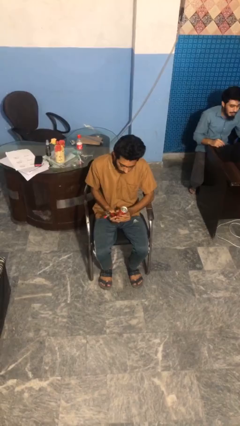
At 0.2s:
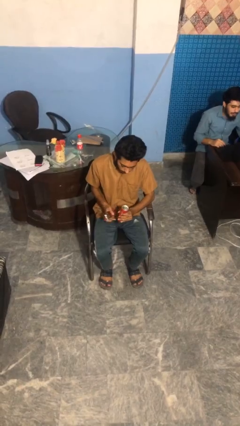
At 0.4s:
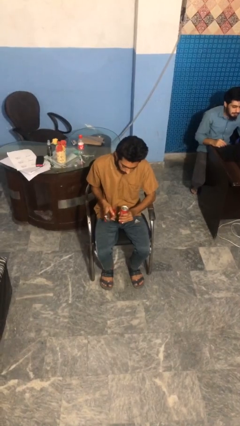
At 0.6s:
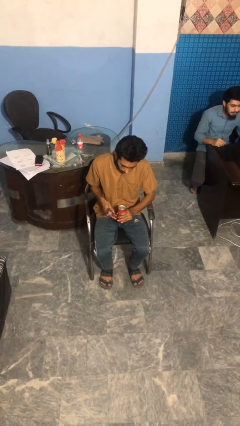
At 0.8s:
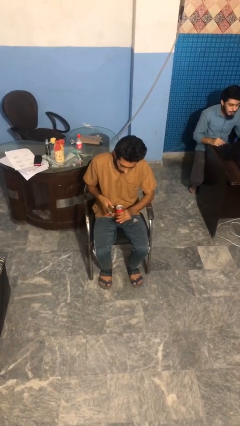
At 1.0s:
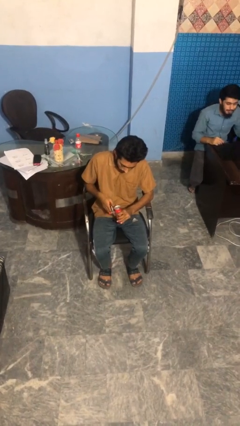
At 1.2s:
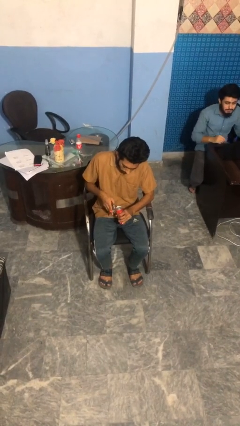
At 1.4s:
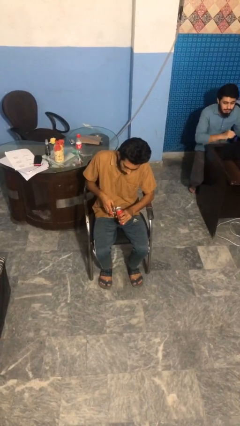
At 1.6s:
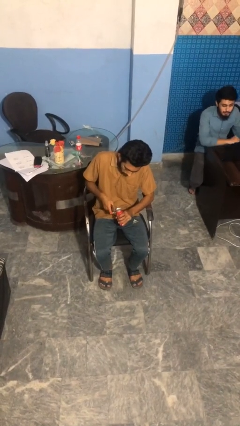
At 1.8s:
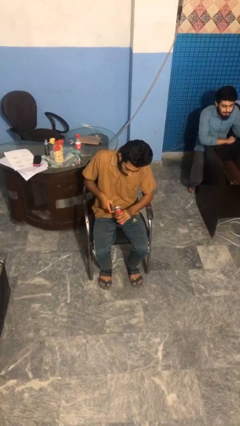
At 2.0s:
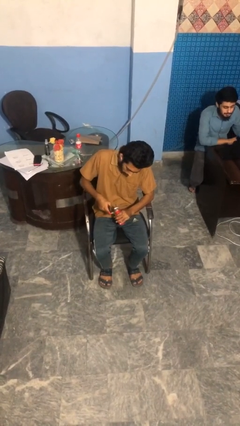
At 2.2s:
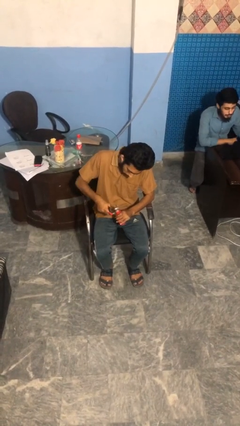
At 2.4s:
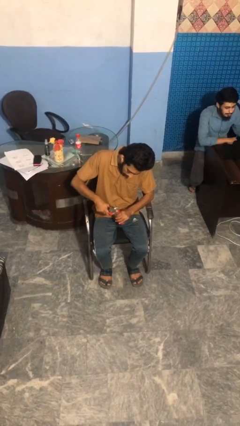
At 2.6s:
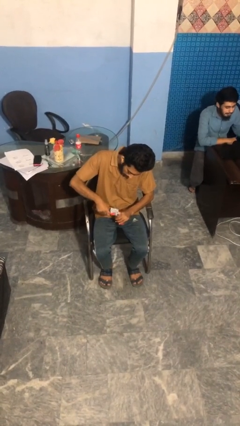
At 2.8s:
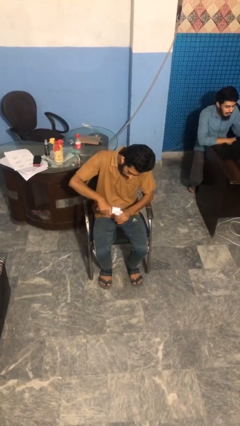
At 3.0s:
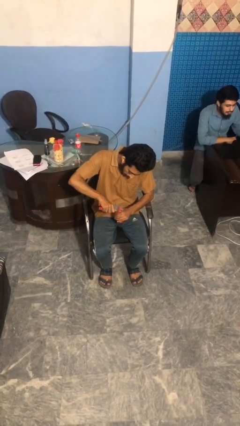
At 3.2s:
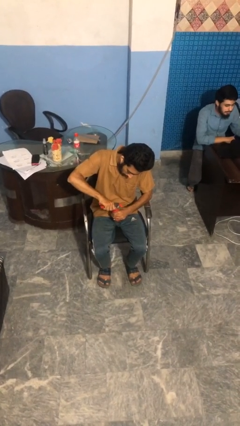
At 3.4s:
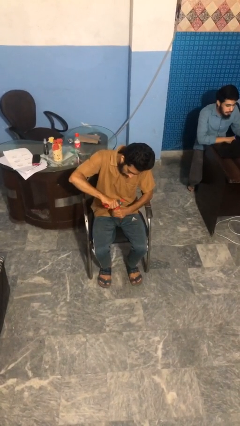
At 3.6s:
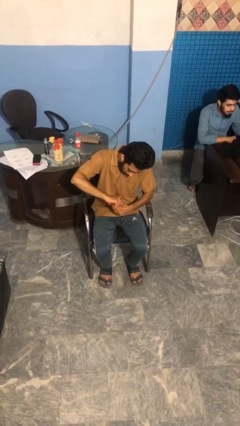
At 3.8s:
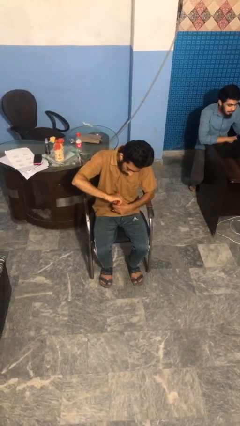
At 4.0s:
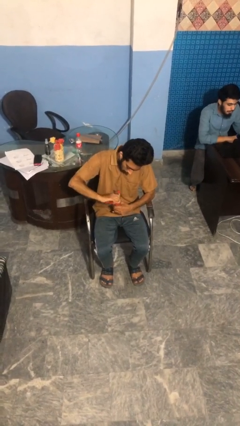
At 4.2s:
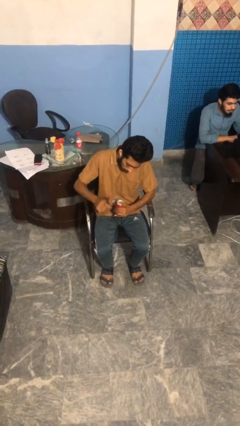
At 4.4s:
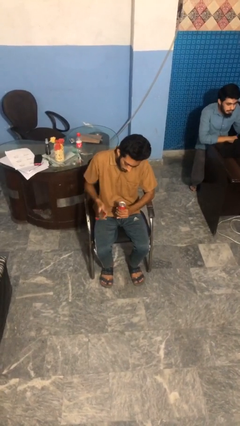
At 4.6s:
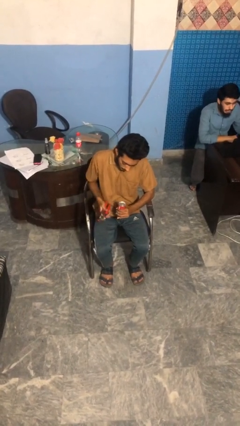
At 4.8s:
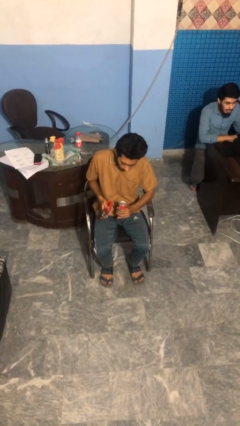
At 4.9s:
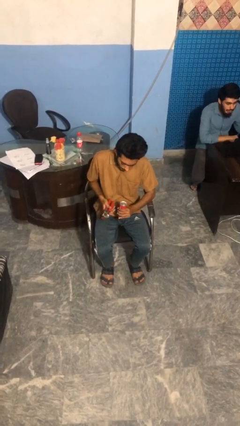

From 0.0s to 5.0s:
person opens can with can opener

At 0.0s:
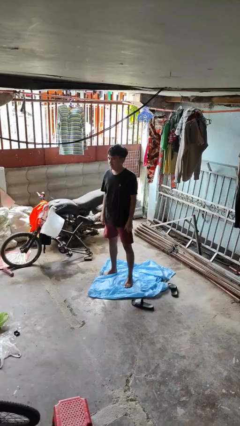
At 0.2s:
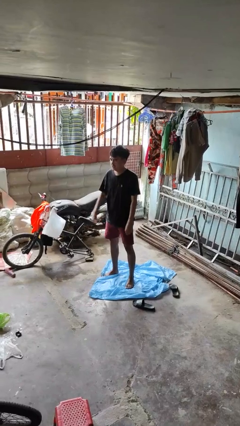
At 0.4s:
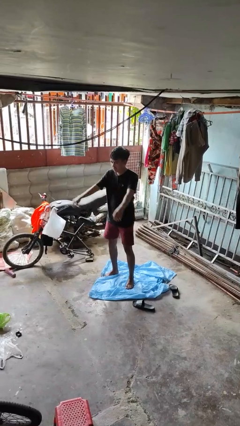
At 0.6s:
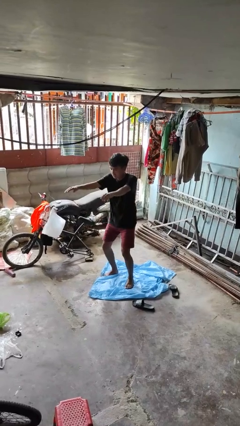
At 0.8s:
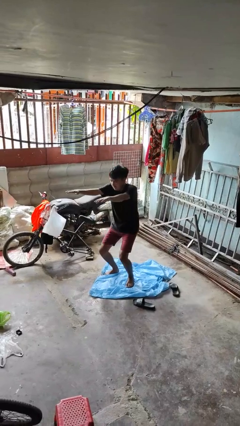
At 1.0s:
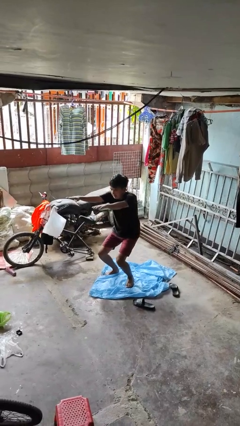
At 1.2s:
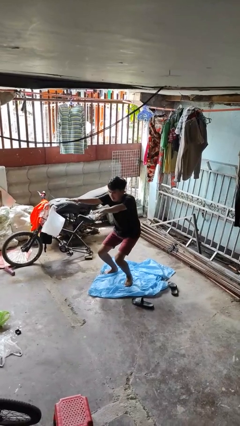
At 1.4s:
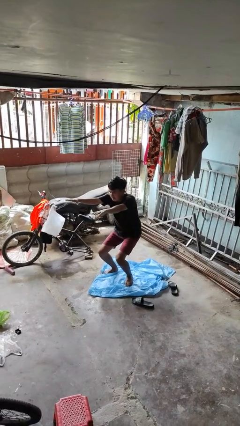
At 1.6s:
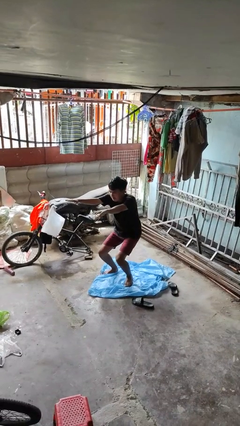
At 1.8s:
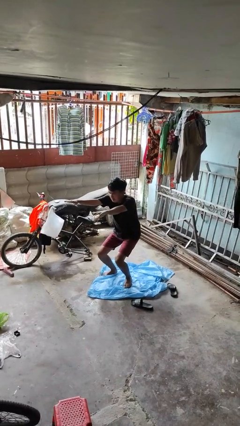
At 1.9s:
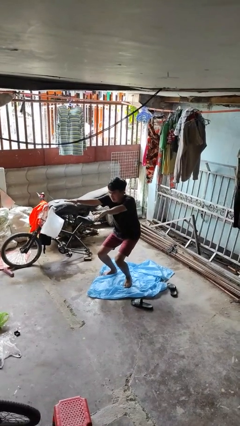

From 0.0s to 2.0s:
person squats

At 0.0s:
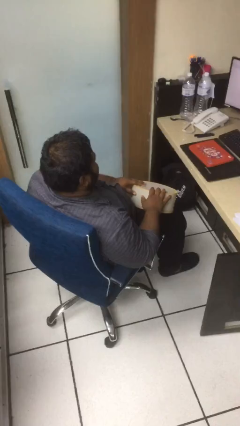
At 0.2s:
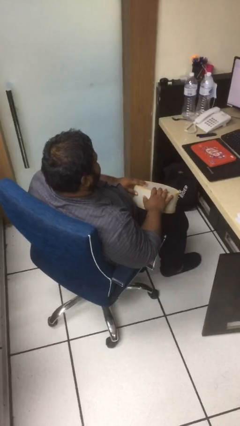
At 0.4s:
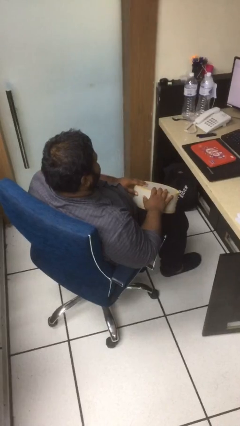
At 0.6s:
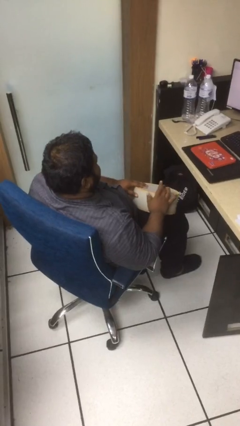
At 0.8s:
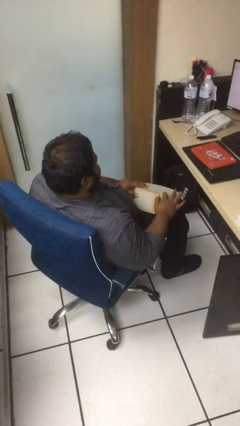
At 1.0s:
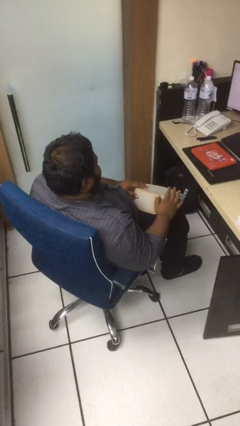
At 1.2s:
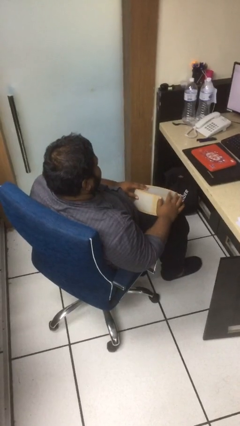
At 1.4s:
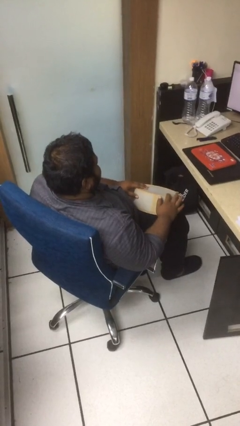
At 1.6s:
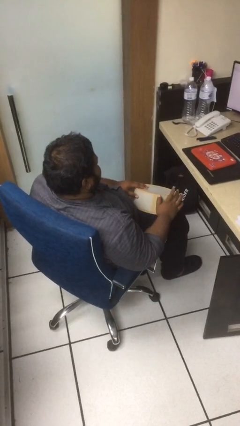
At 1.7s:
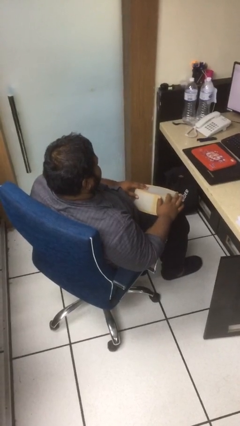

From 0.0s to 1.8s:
person taps object with finger

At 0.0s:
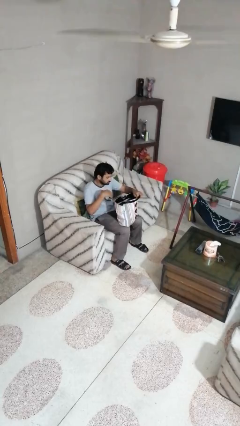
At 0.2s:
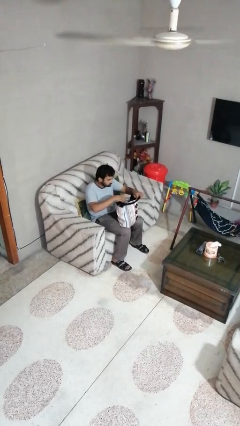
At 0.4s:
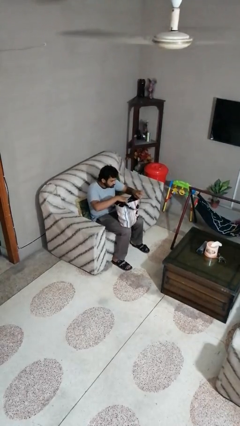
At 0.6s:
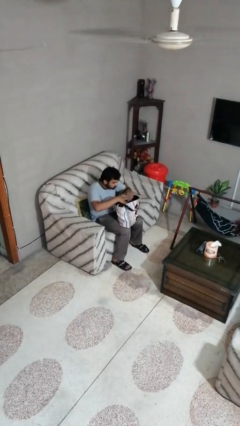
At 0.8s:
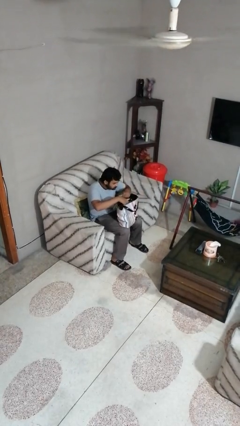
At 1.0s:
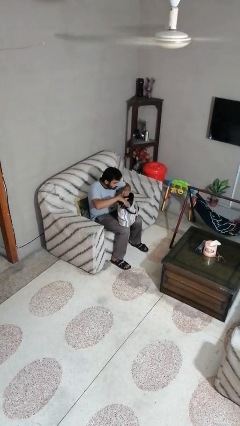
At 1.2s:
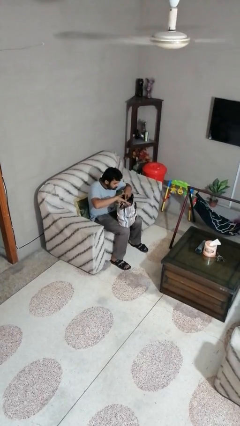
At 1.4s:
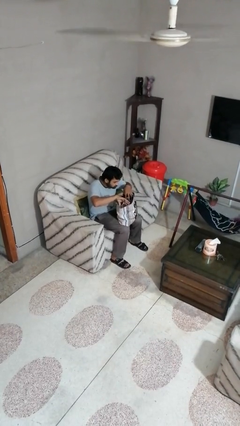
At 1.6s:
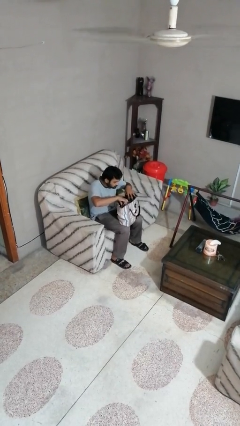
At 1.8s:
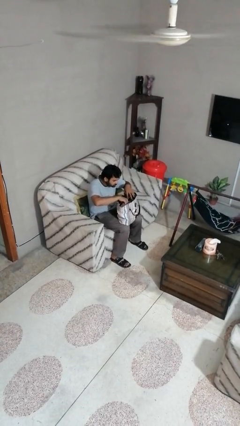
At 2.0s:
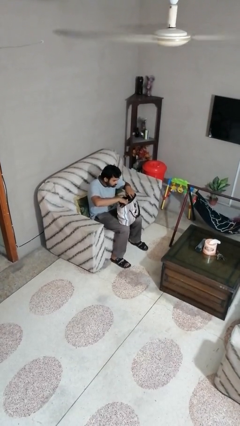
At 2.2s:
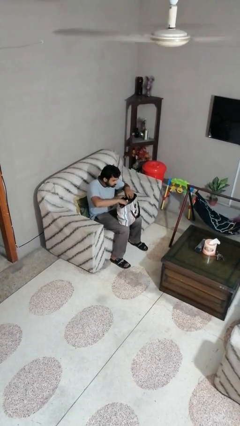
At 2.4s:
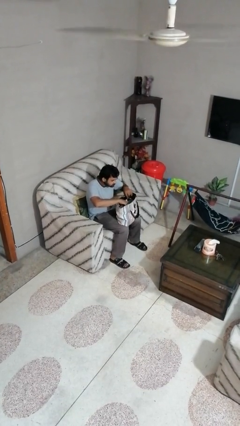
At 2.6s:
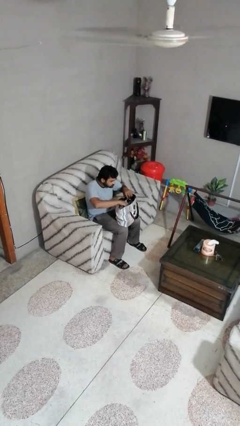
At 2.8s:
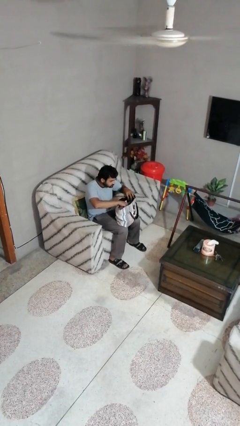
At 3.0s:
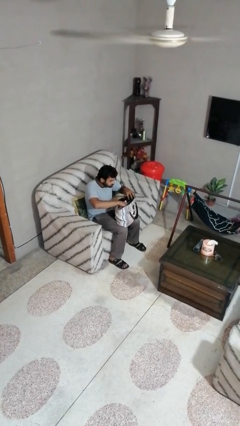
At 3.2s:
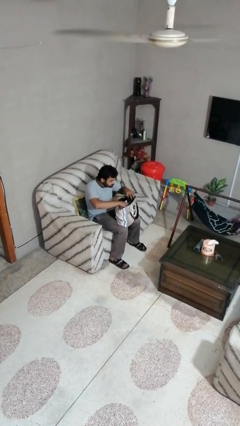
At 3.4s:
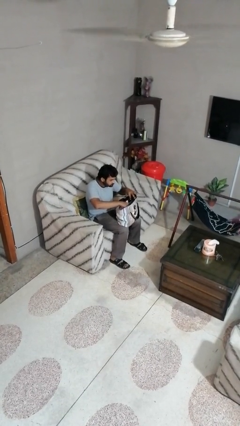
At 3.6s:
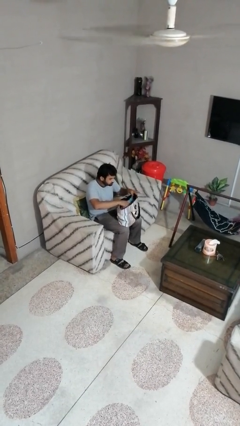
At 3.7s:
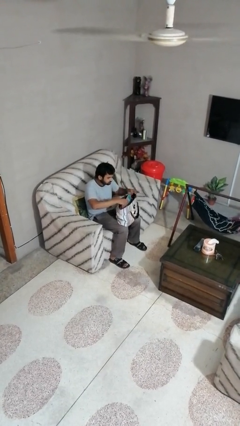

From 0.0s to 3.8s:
person searches in backpack

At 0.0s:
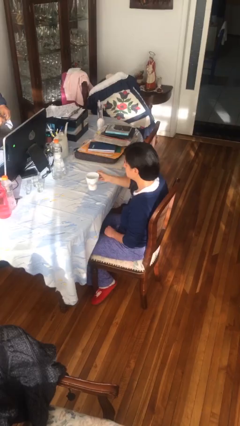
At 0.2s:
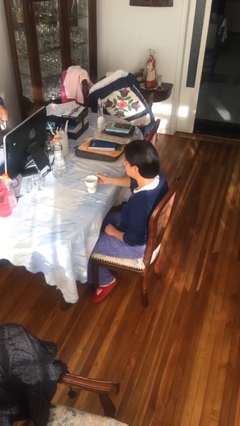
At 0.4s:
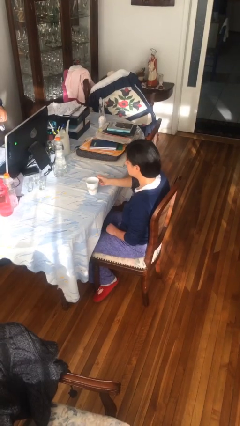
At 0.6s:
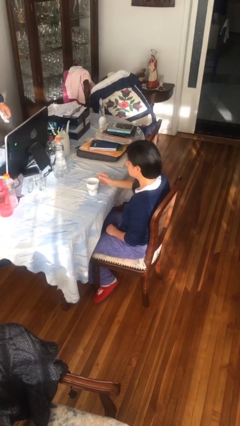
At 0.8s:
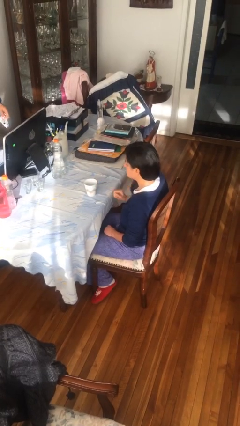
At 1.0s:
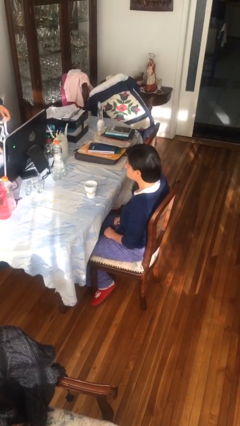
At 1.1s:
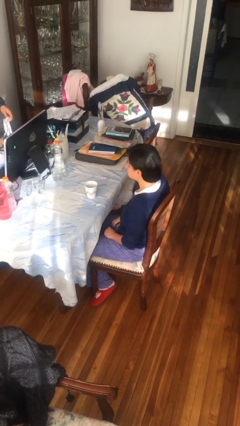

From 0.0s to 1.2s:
person puts down object on table

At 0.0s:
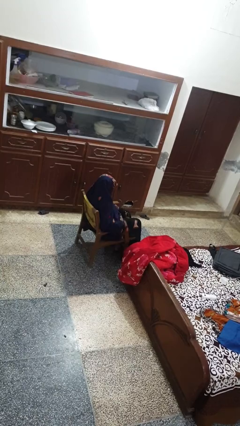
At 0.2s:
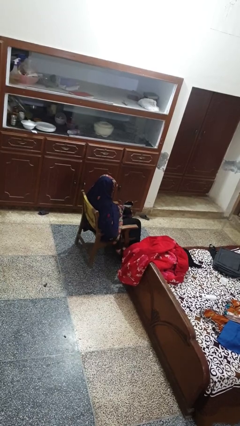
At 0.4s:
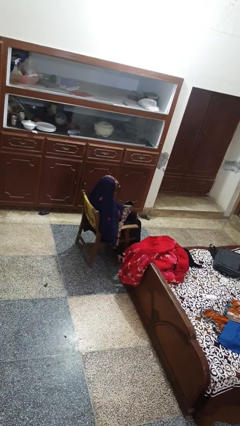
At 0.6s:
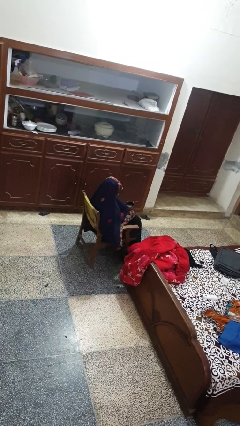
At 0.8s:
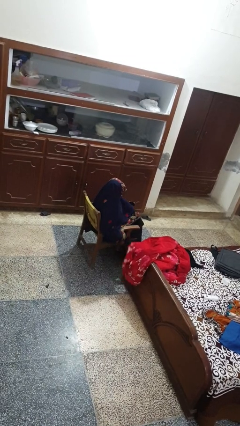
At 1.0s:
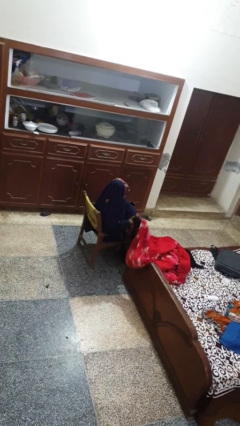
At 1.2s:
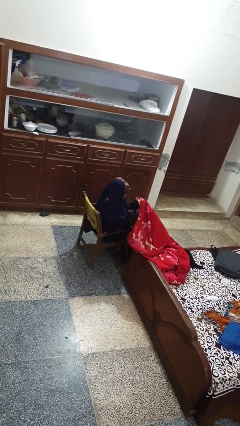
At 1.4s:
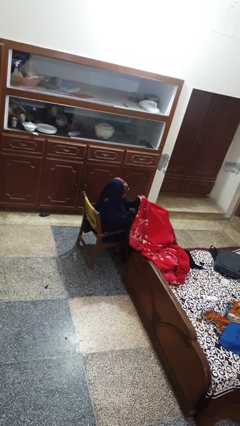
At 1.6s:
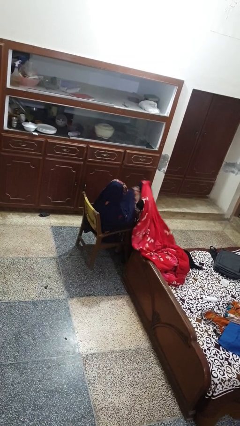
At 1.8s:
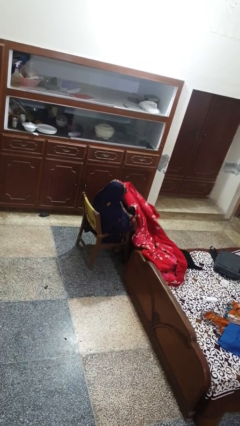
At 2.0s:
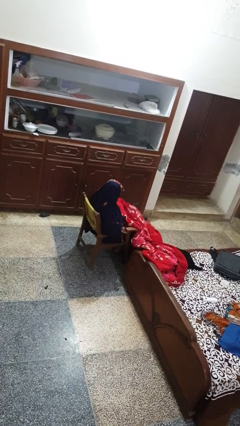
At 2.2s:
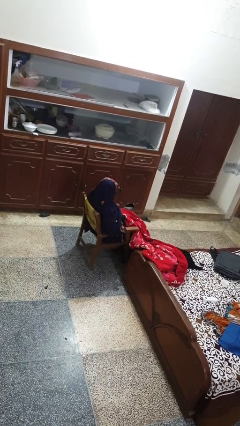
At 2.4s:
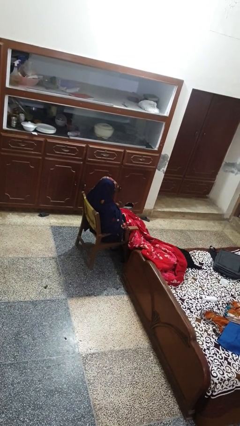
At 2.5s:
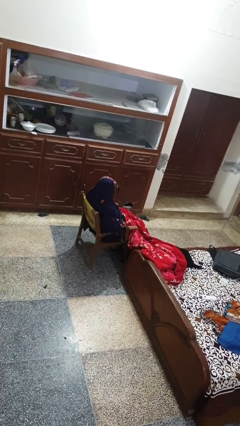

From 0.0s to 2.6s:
person covers with blanket

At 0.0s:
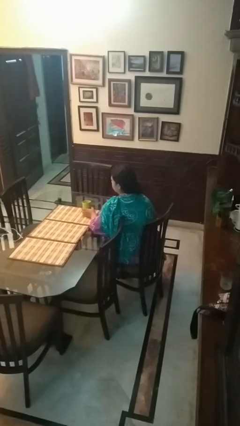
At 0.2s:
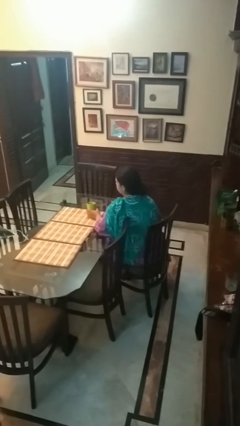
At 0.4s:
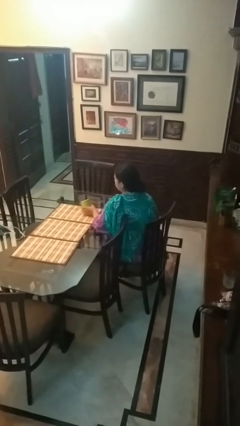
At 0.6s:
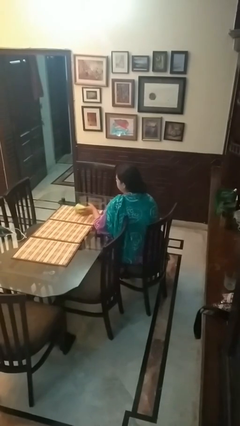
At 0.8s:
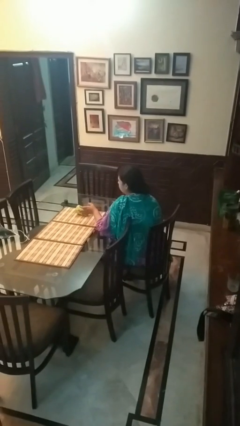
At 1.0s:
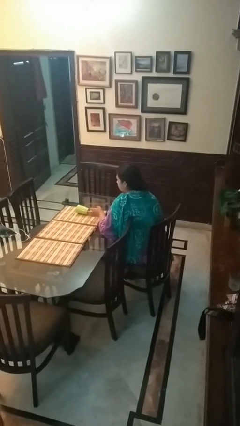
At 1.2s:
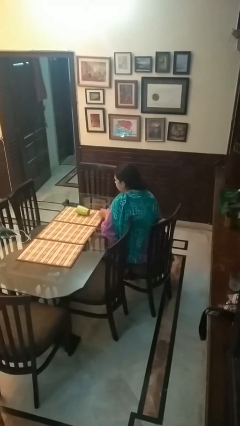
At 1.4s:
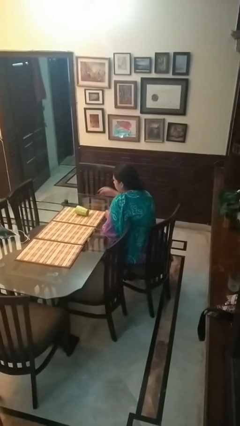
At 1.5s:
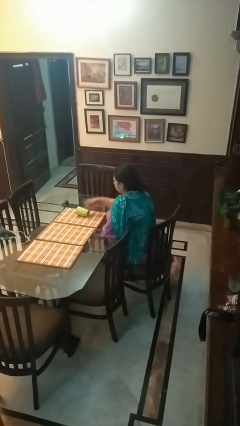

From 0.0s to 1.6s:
person knocks over glass
